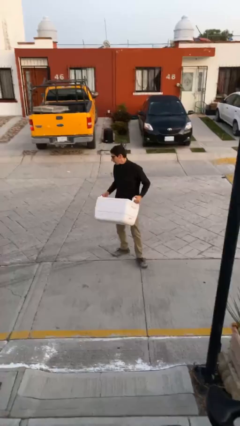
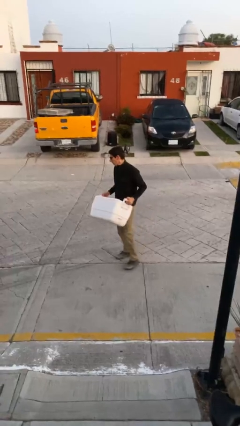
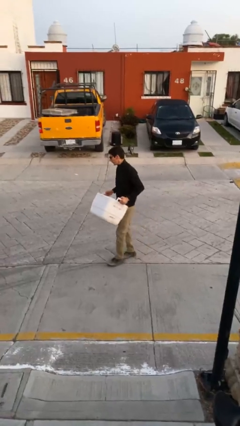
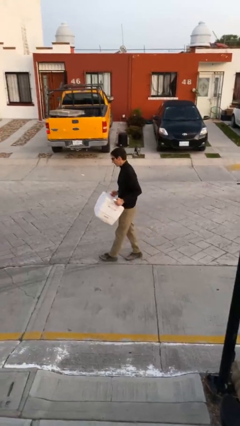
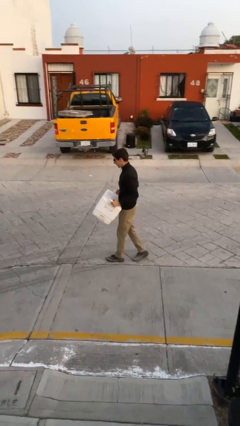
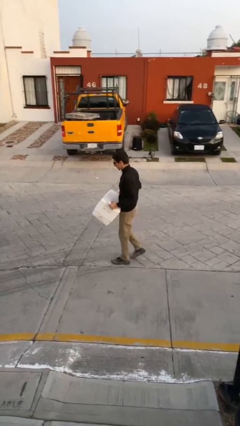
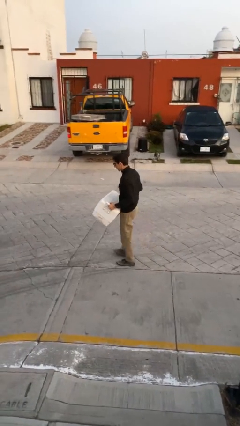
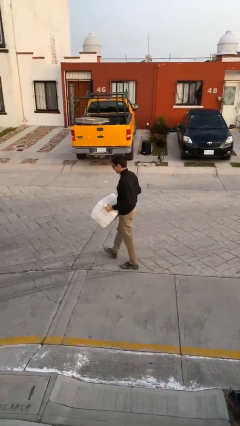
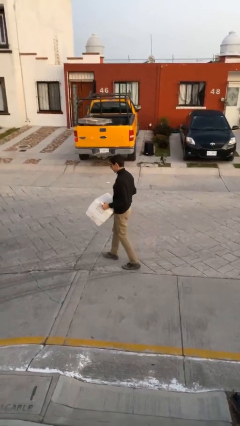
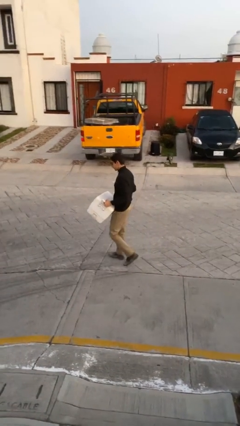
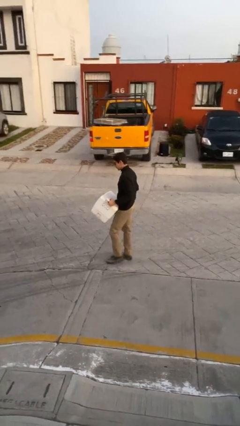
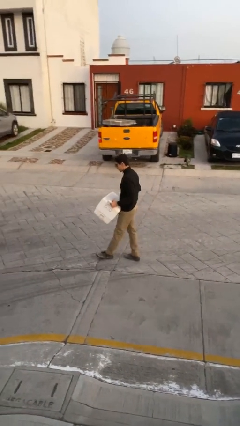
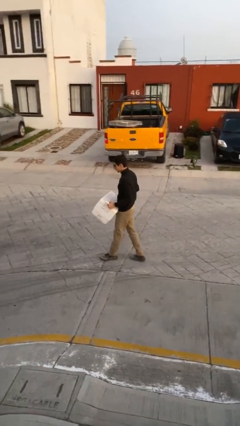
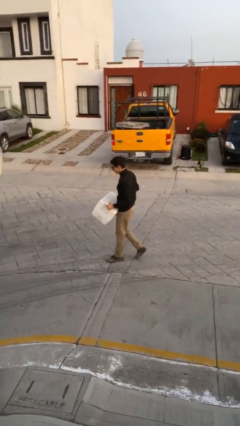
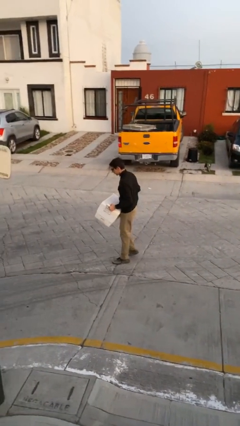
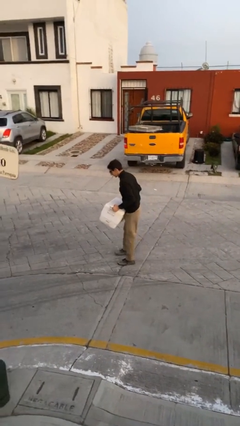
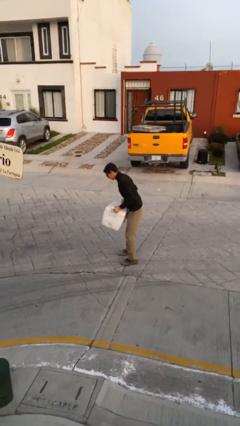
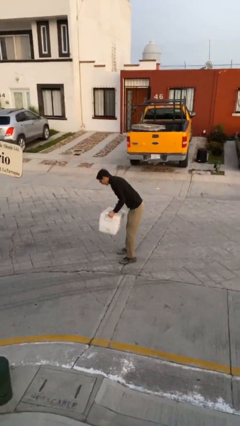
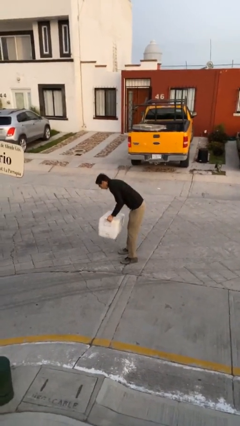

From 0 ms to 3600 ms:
person carries heavy object

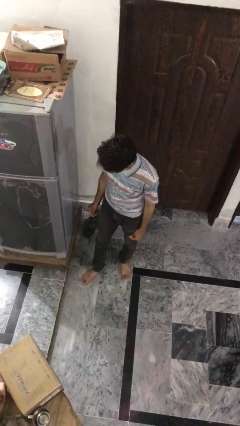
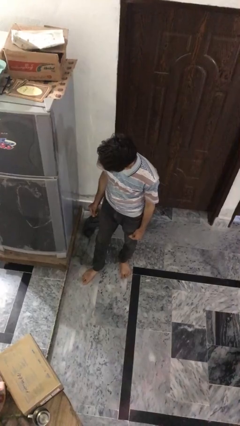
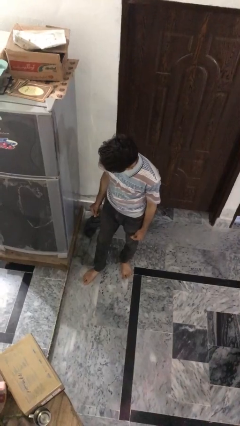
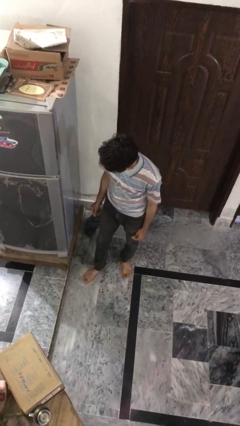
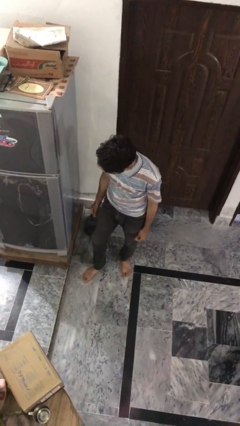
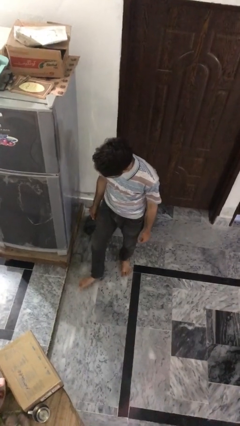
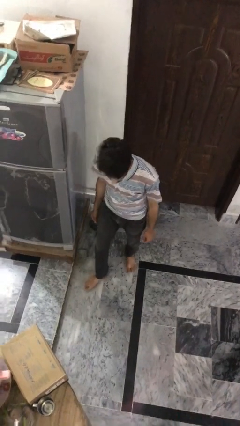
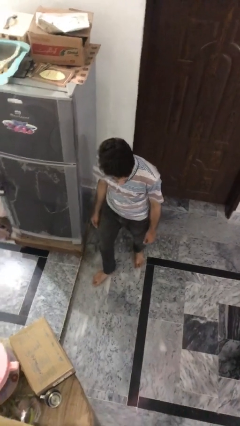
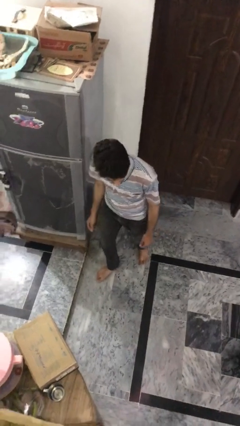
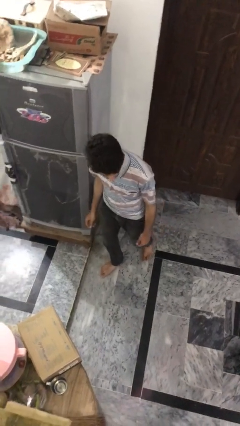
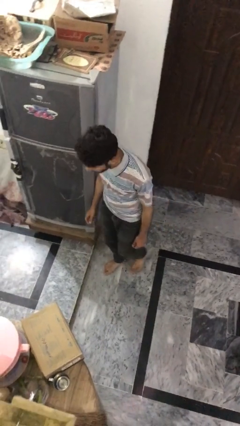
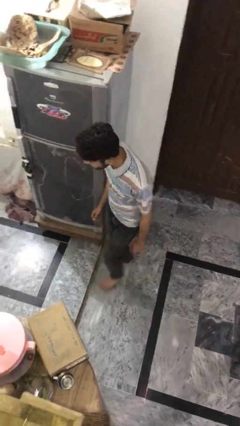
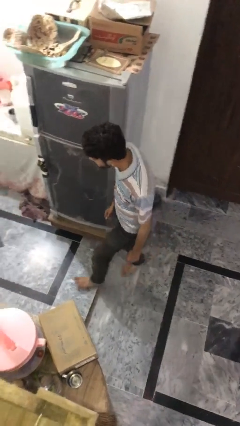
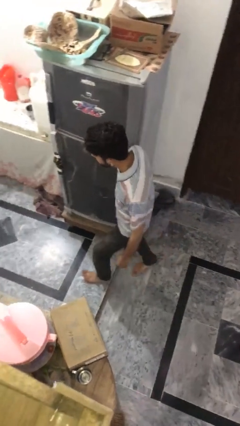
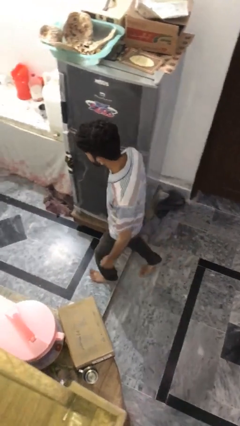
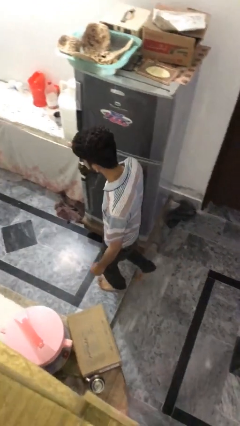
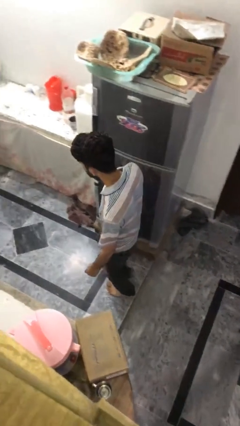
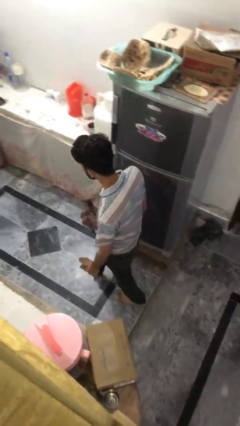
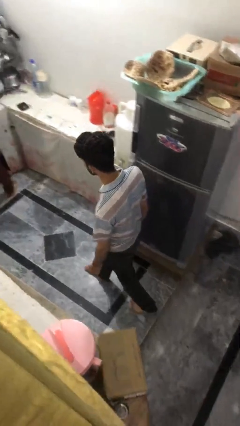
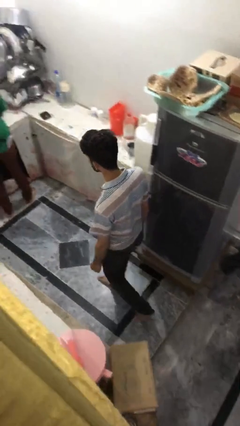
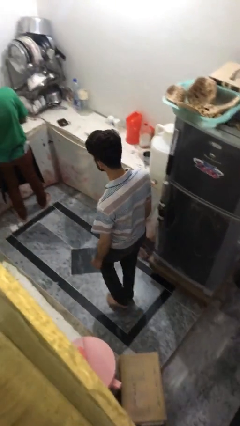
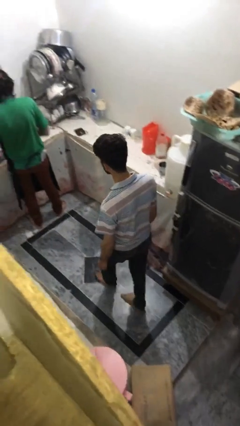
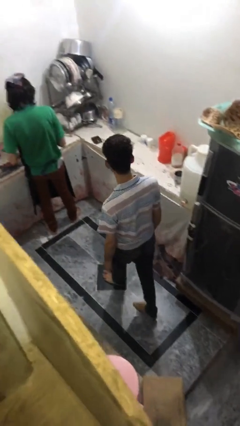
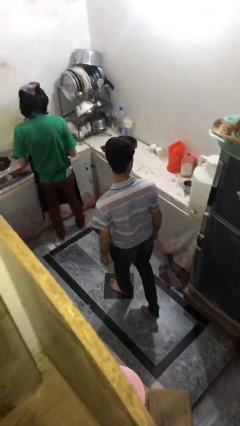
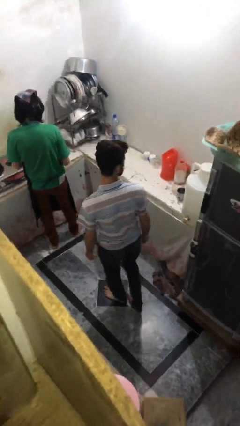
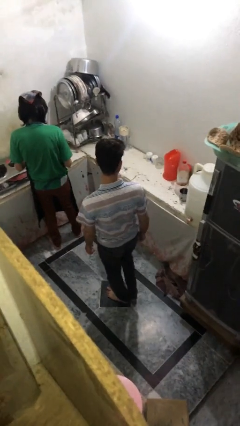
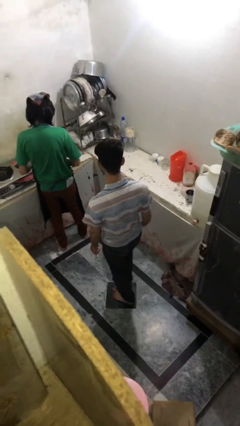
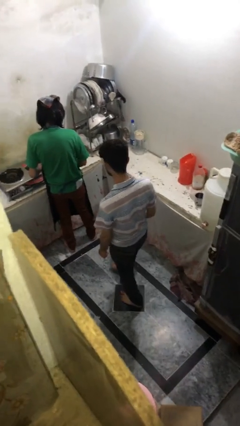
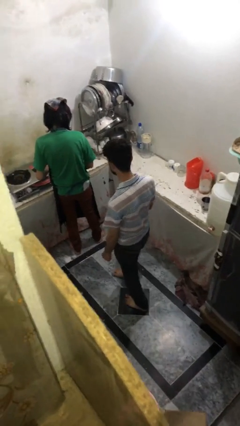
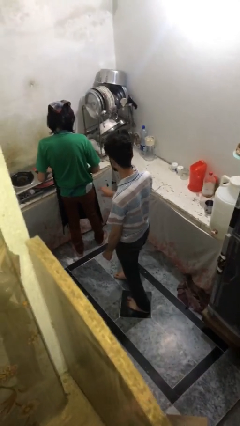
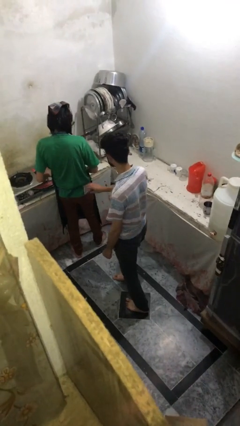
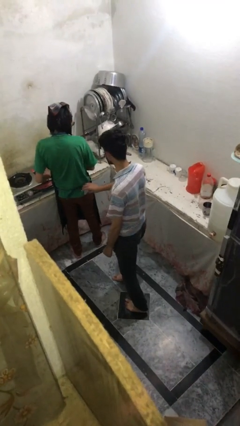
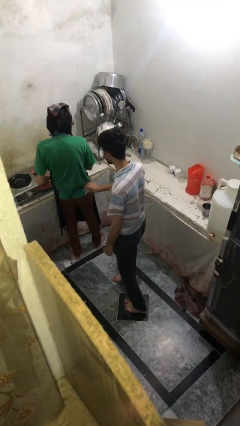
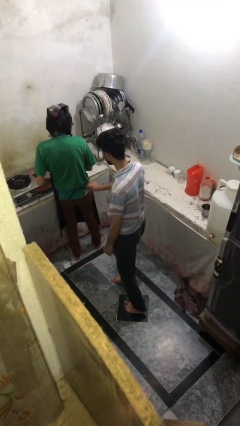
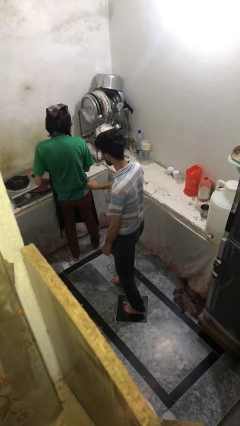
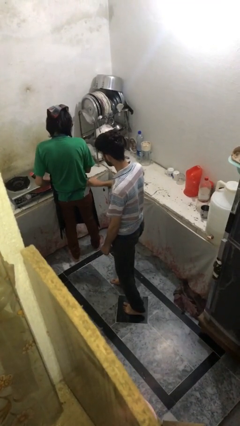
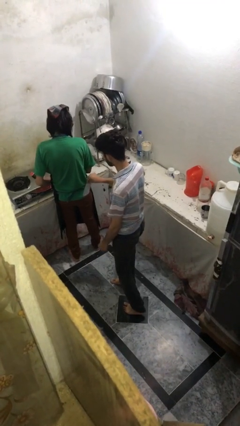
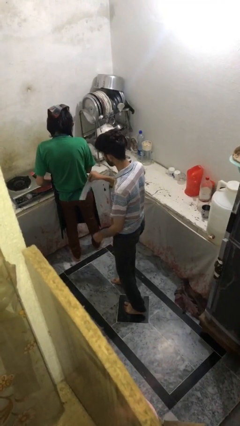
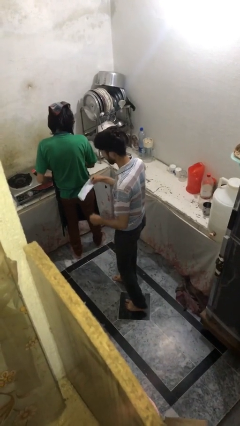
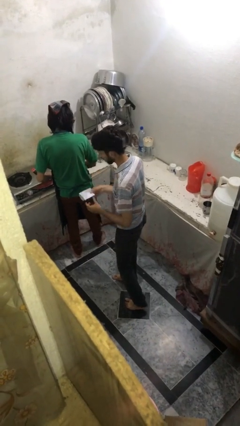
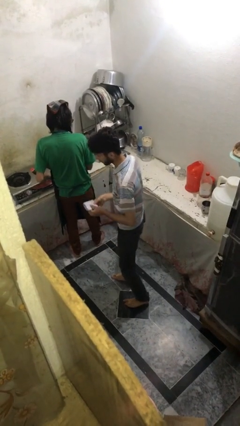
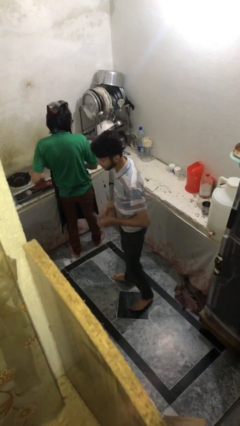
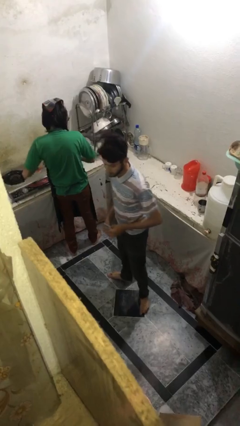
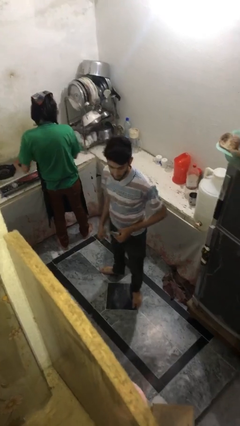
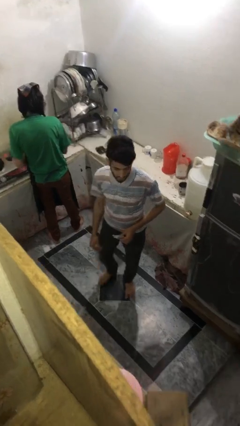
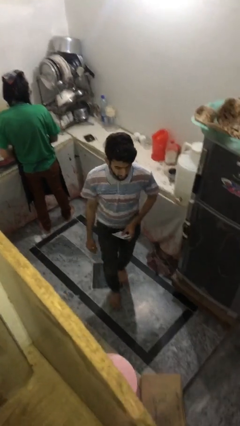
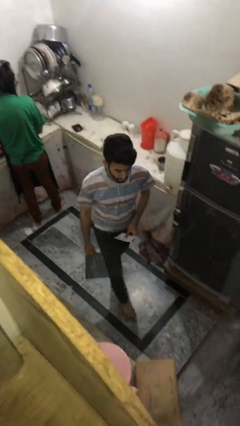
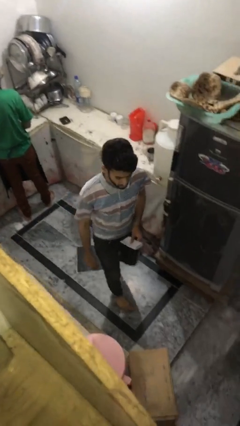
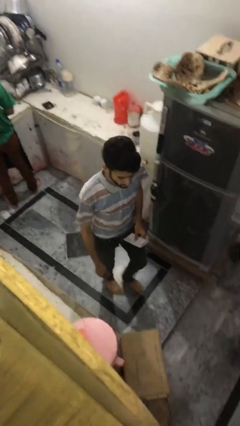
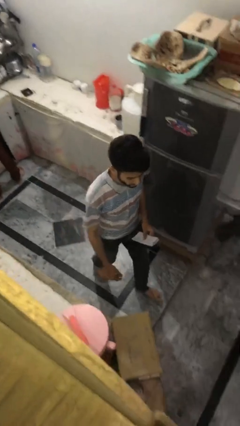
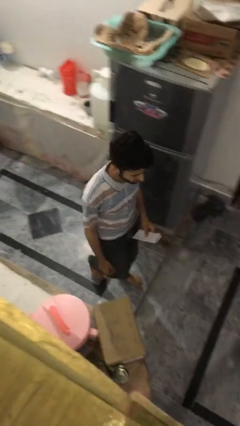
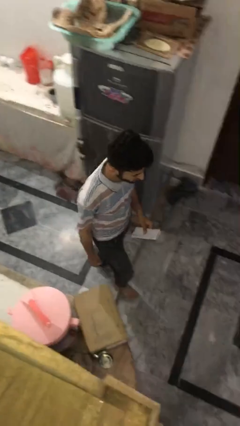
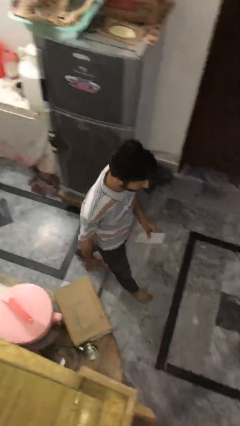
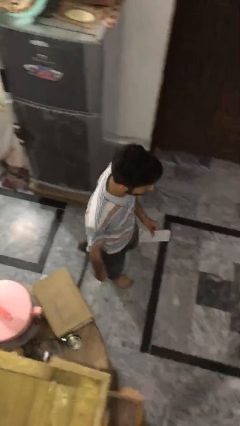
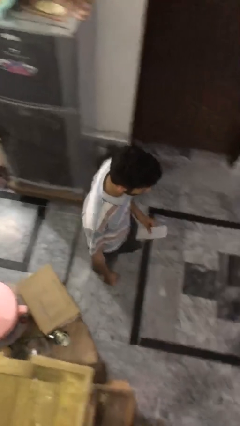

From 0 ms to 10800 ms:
person steals object from person

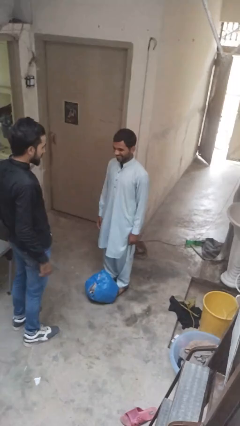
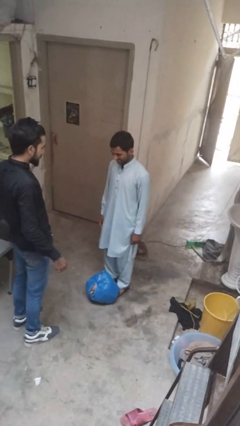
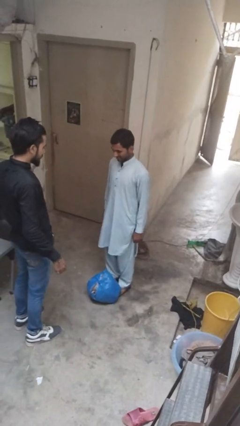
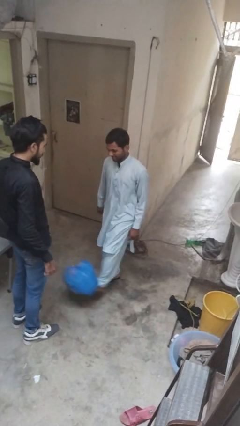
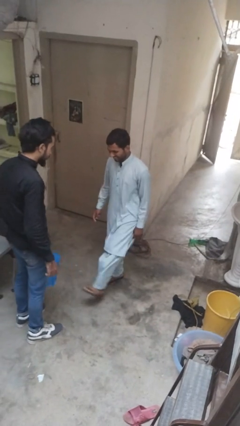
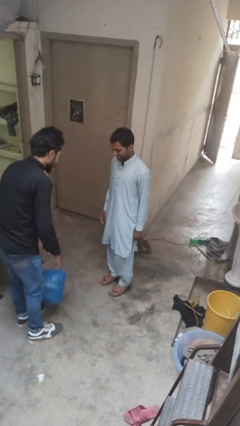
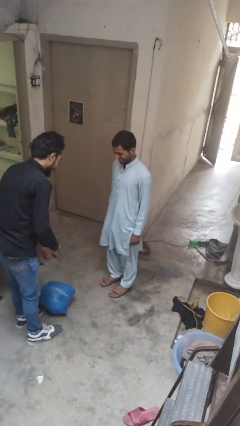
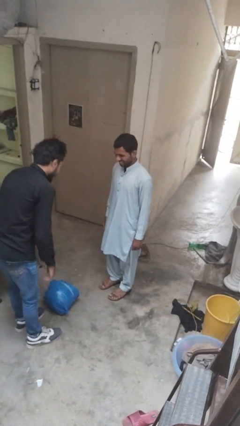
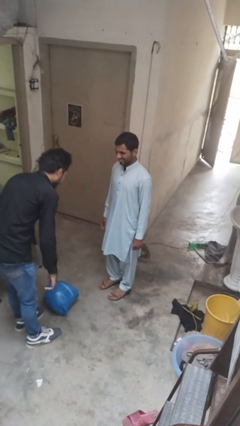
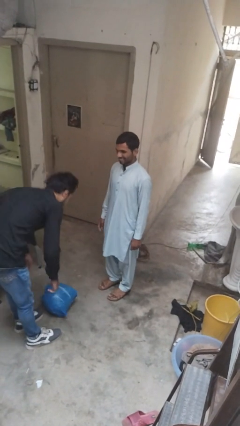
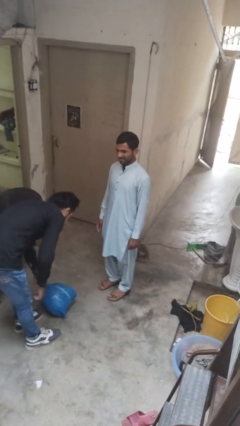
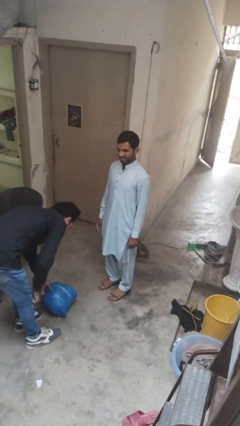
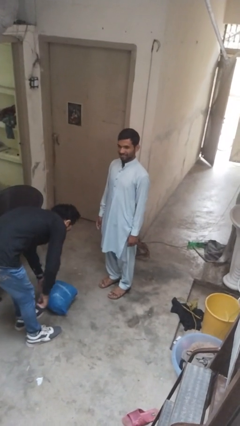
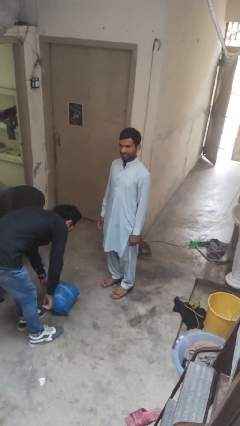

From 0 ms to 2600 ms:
person kicks object to person

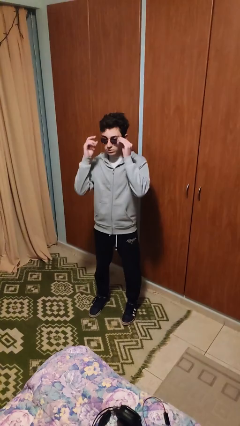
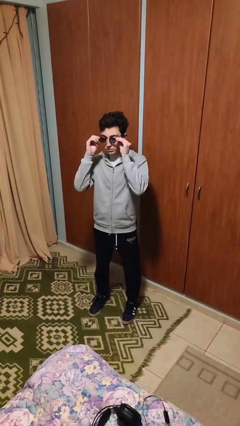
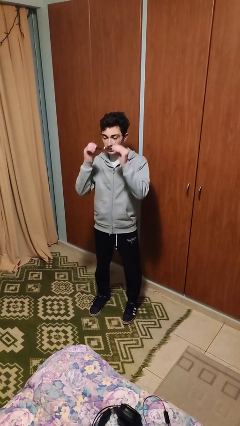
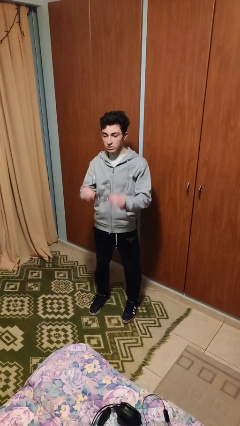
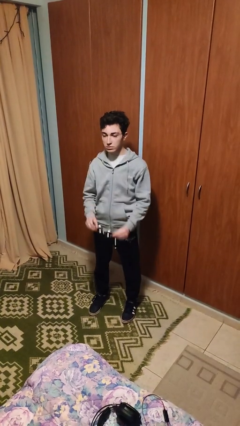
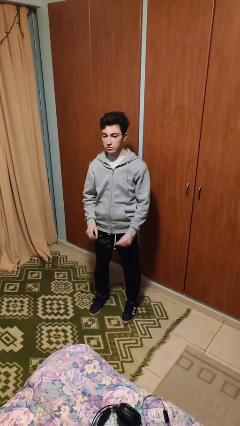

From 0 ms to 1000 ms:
person takes off glasses
